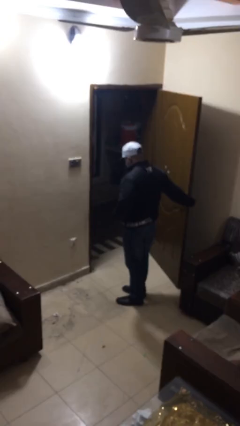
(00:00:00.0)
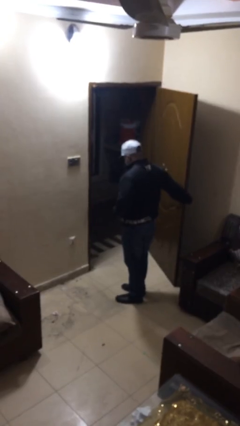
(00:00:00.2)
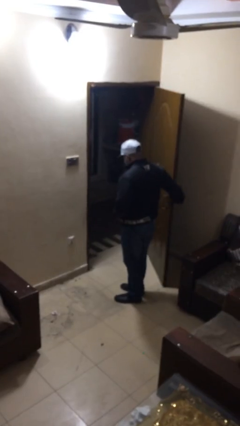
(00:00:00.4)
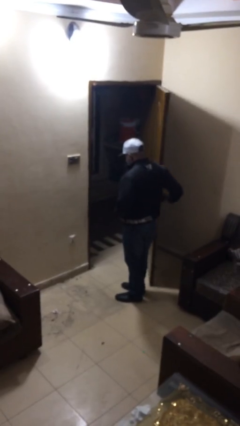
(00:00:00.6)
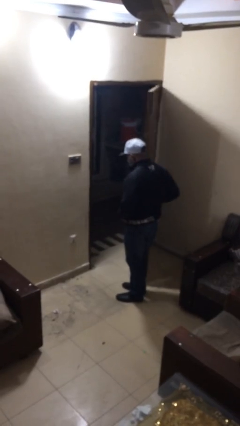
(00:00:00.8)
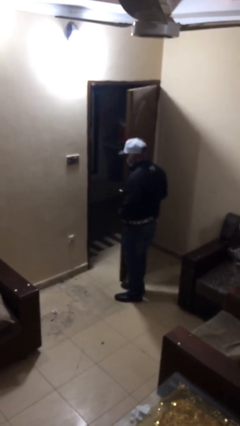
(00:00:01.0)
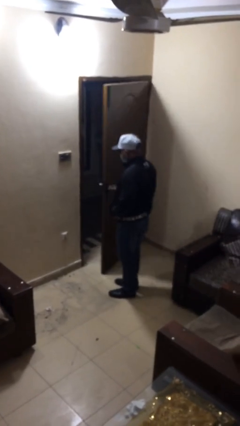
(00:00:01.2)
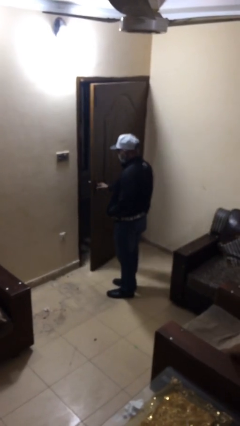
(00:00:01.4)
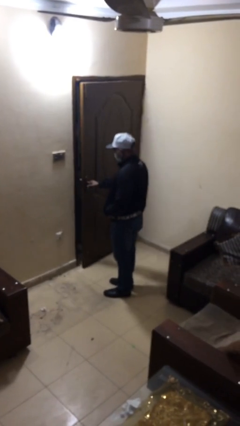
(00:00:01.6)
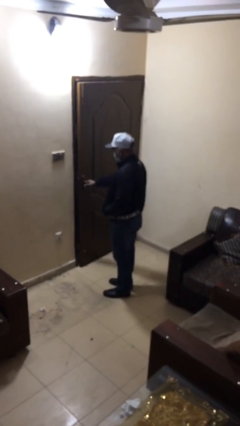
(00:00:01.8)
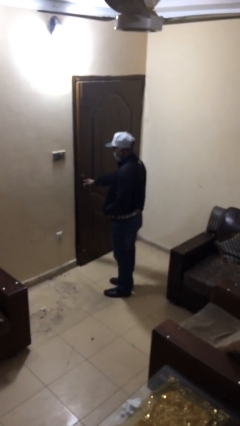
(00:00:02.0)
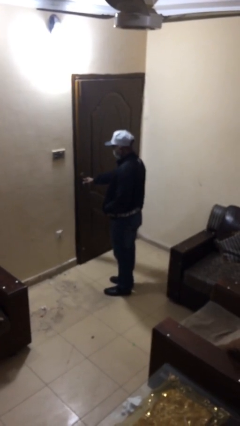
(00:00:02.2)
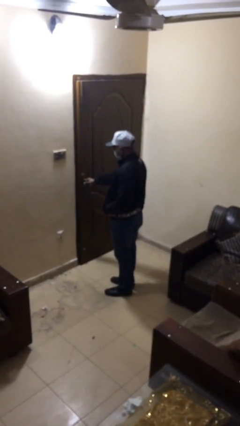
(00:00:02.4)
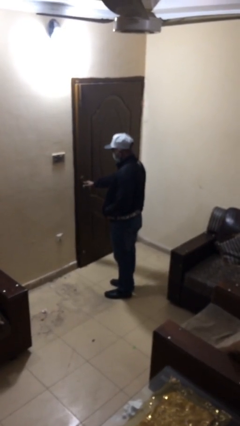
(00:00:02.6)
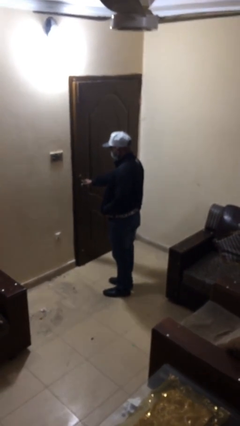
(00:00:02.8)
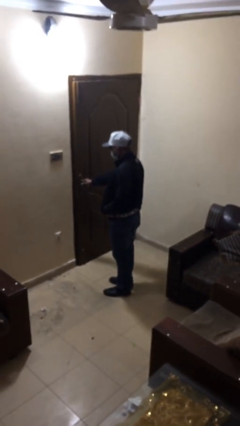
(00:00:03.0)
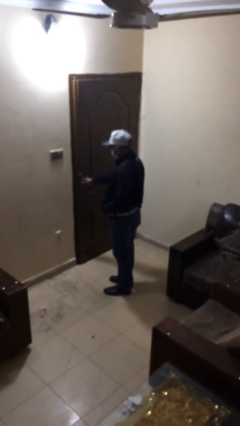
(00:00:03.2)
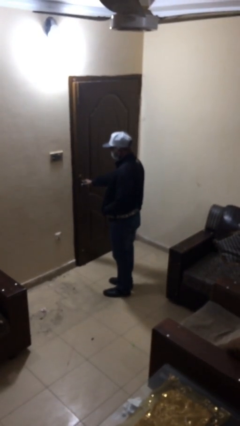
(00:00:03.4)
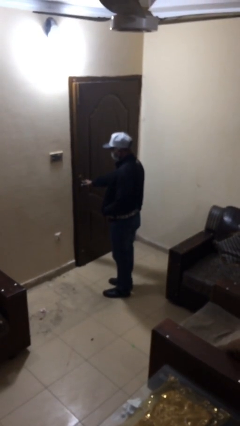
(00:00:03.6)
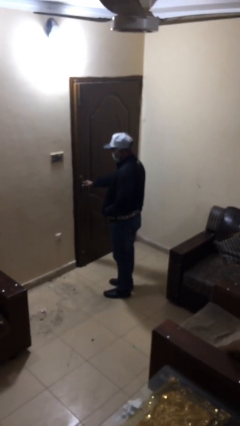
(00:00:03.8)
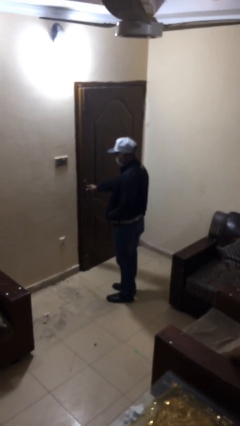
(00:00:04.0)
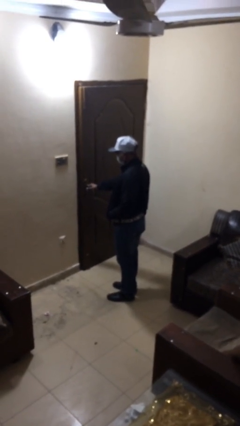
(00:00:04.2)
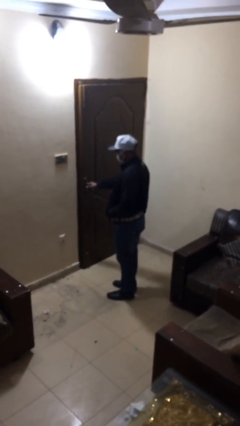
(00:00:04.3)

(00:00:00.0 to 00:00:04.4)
person closes facility door

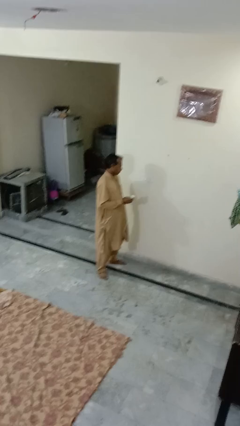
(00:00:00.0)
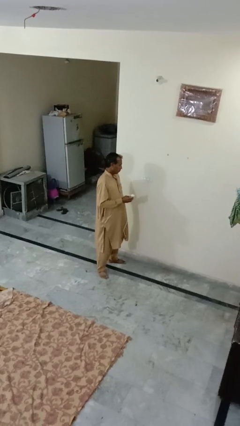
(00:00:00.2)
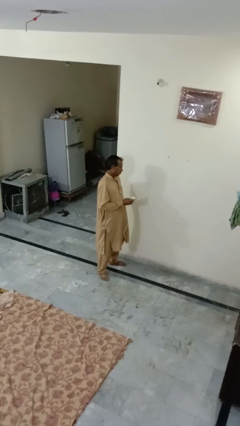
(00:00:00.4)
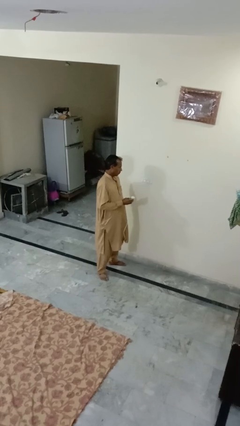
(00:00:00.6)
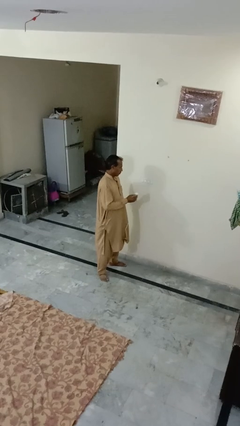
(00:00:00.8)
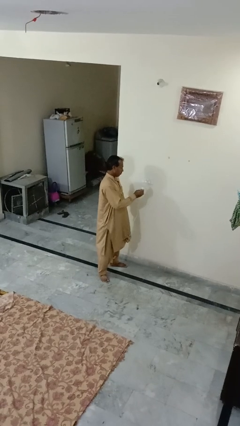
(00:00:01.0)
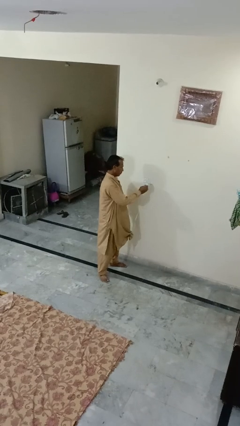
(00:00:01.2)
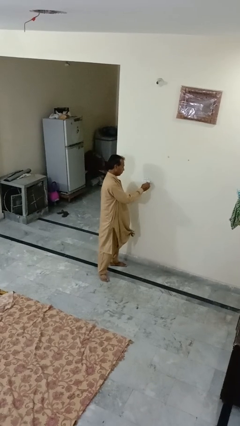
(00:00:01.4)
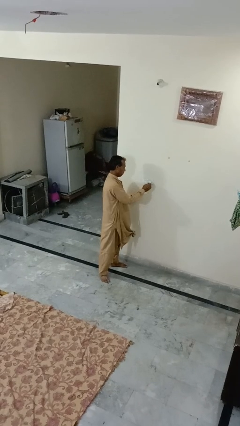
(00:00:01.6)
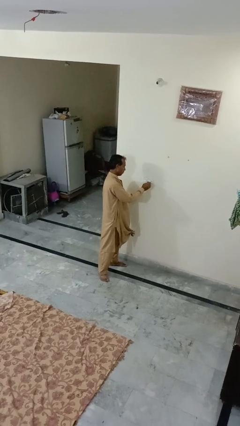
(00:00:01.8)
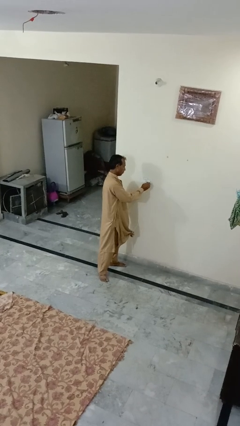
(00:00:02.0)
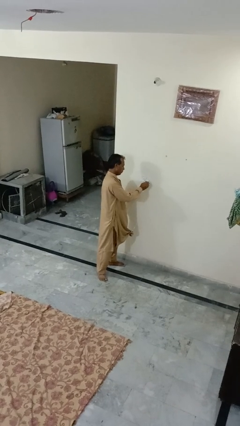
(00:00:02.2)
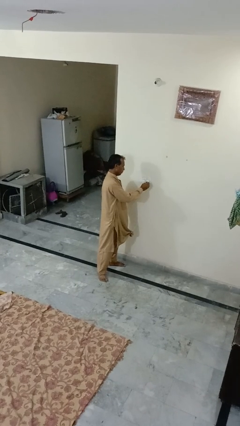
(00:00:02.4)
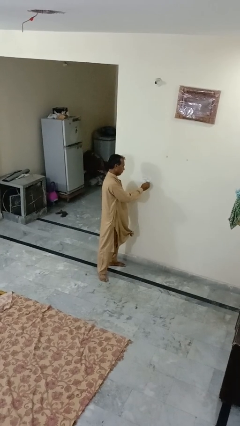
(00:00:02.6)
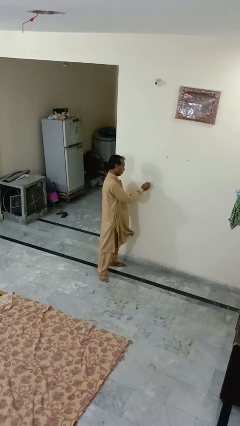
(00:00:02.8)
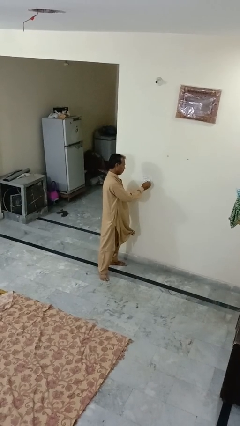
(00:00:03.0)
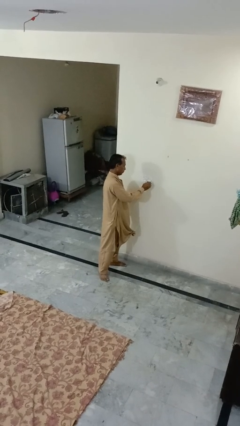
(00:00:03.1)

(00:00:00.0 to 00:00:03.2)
person plugs into electrical socket

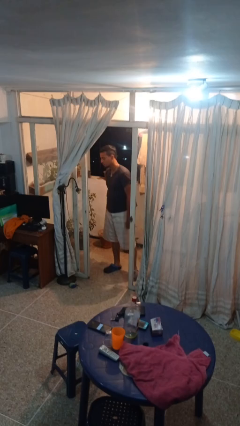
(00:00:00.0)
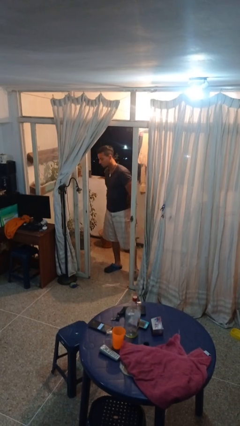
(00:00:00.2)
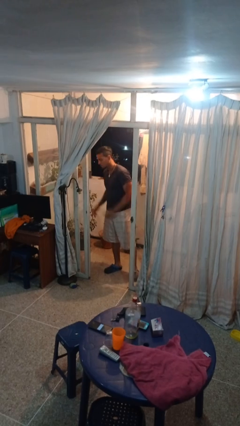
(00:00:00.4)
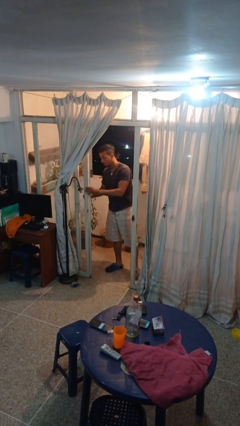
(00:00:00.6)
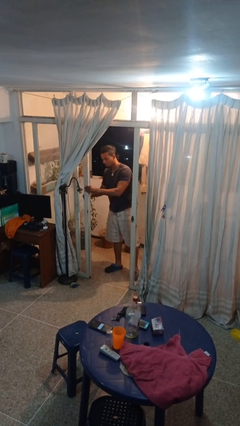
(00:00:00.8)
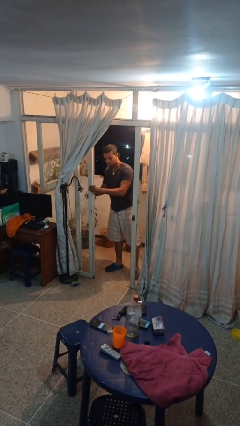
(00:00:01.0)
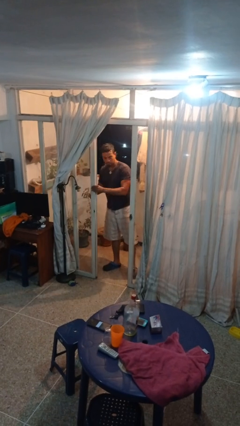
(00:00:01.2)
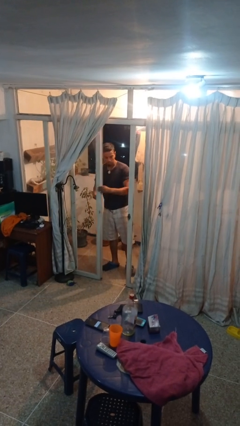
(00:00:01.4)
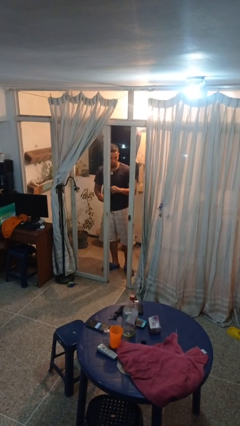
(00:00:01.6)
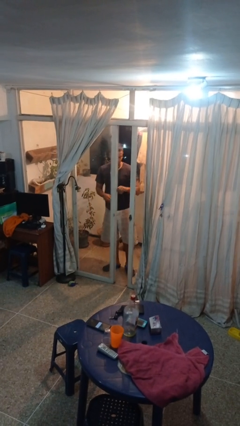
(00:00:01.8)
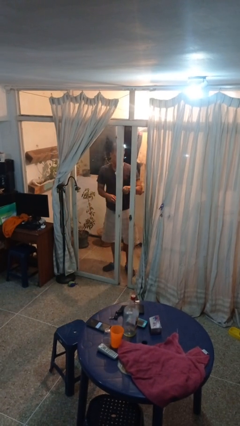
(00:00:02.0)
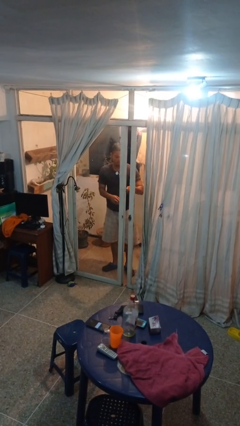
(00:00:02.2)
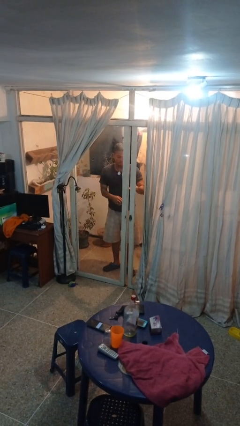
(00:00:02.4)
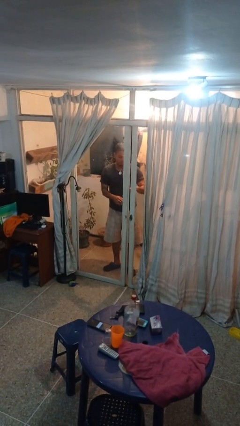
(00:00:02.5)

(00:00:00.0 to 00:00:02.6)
person closes sliding door

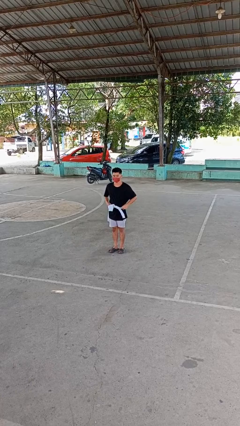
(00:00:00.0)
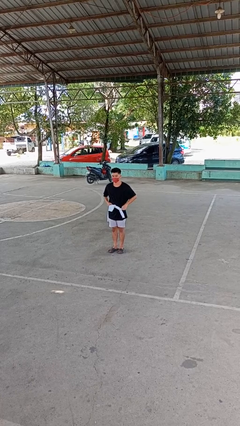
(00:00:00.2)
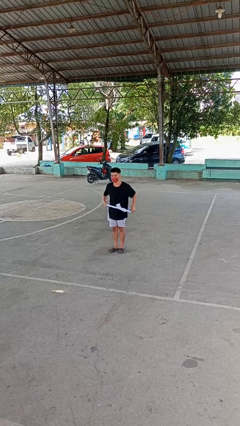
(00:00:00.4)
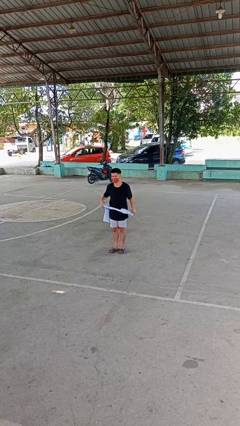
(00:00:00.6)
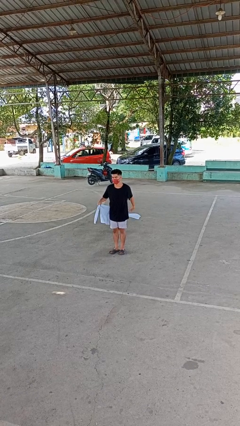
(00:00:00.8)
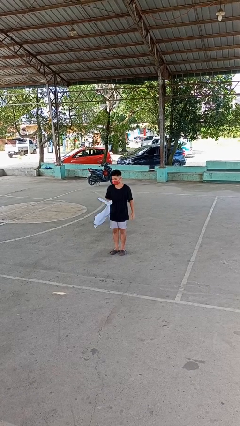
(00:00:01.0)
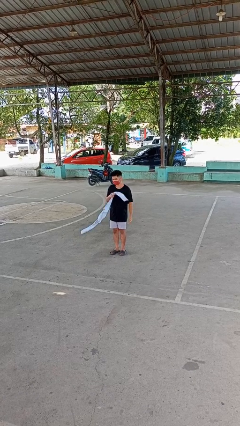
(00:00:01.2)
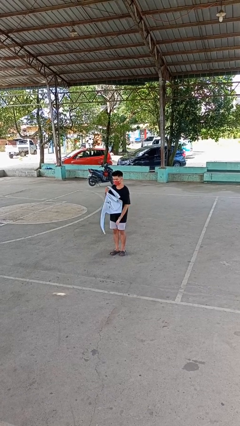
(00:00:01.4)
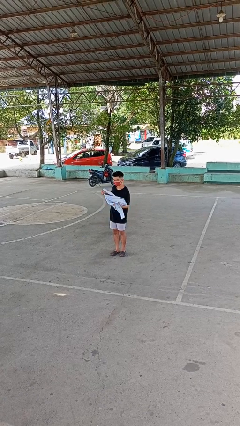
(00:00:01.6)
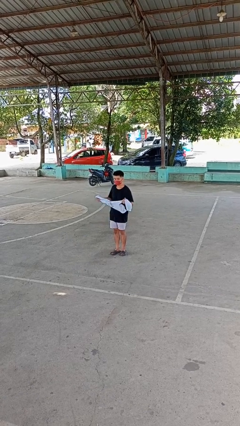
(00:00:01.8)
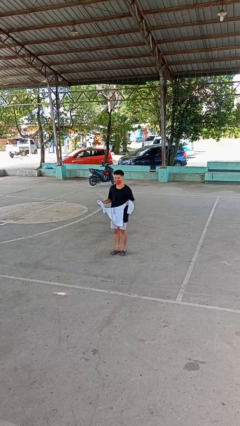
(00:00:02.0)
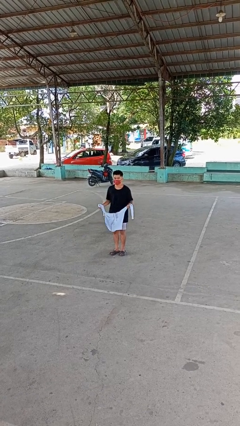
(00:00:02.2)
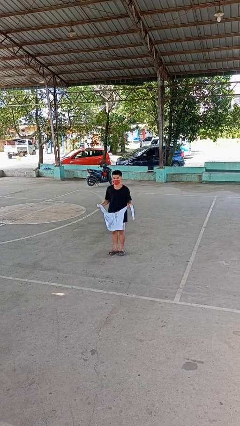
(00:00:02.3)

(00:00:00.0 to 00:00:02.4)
person unties jacket around waist

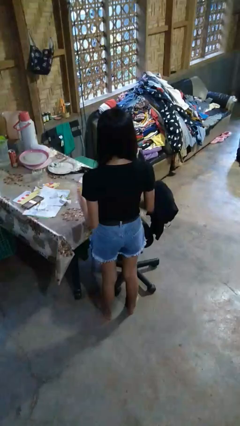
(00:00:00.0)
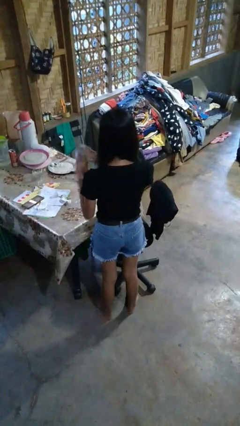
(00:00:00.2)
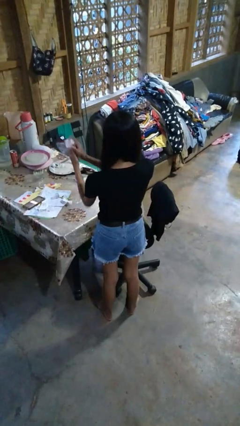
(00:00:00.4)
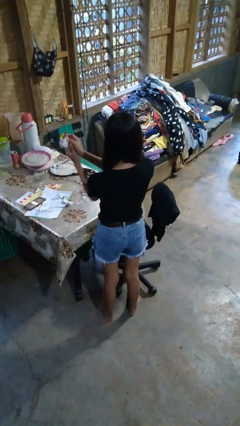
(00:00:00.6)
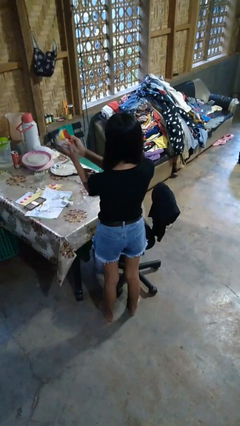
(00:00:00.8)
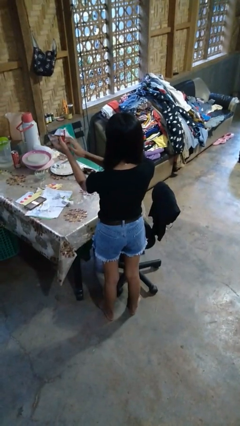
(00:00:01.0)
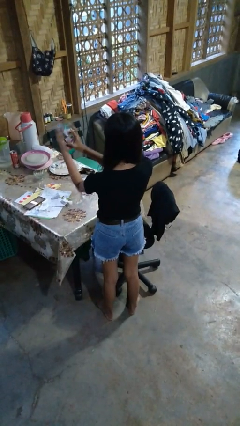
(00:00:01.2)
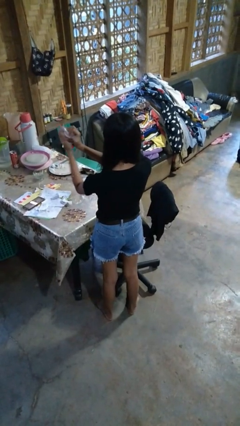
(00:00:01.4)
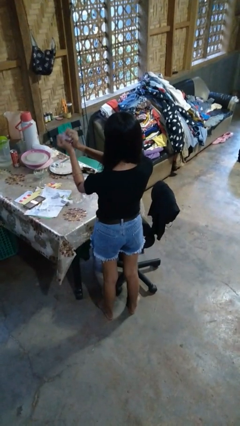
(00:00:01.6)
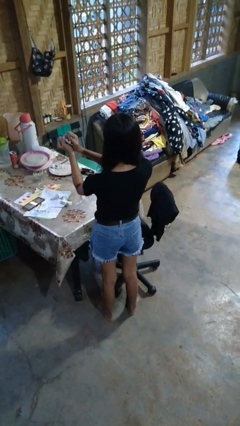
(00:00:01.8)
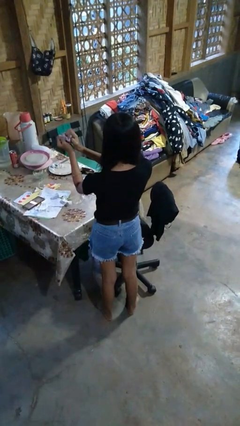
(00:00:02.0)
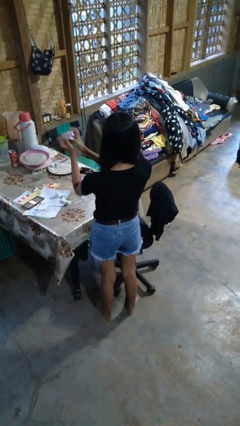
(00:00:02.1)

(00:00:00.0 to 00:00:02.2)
person crumples paper

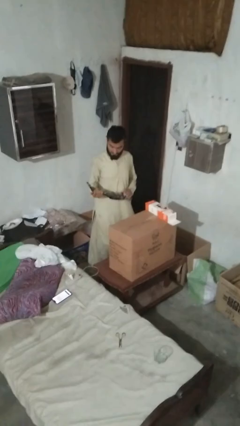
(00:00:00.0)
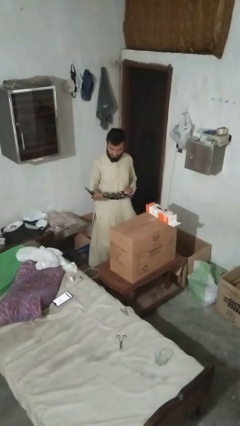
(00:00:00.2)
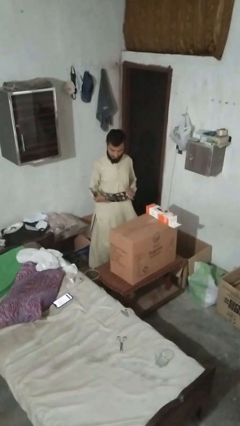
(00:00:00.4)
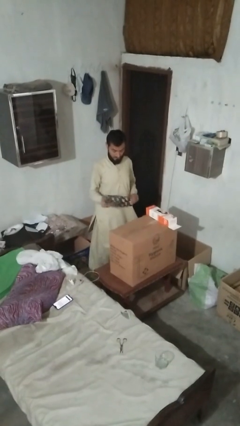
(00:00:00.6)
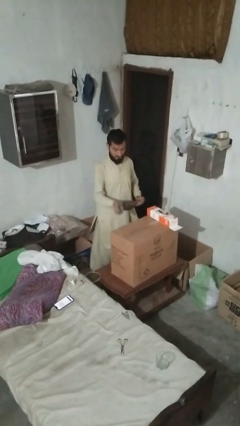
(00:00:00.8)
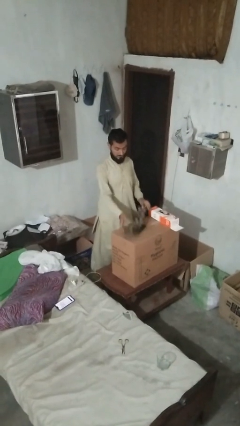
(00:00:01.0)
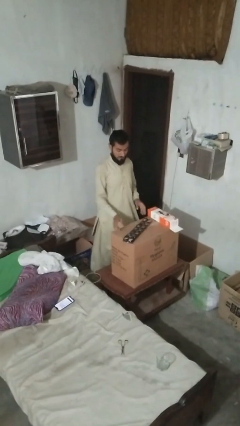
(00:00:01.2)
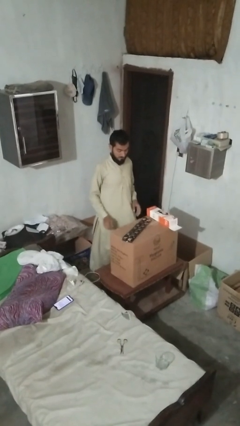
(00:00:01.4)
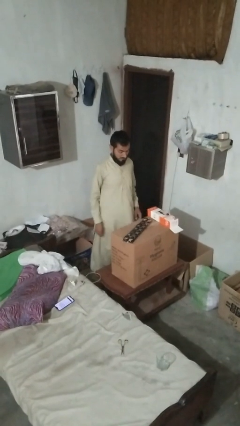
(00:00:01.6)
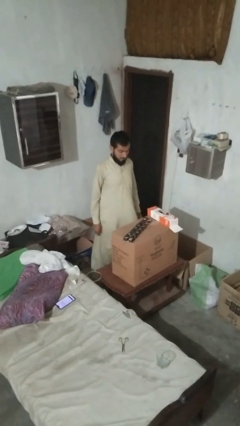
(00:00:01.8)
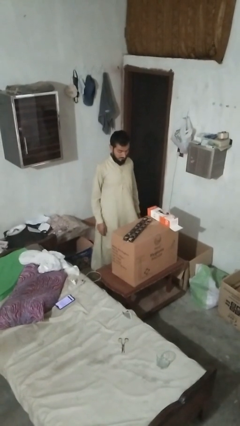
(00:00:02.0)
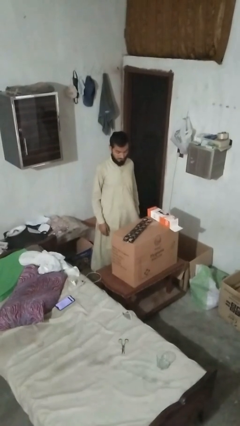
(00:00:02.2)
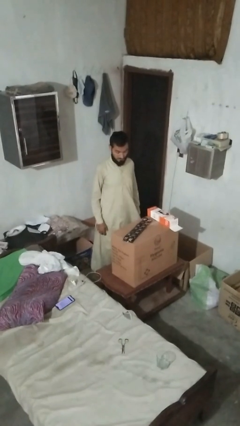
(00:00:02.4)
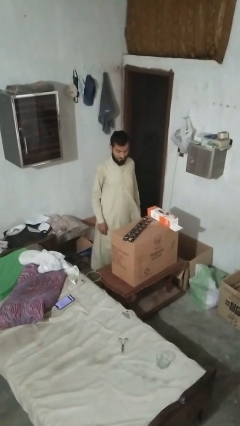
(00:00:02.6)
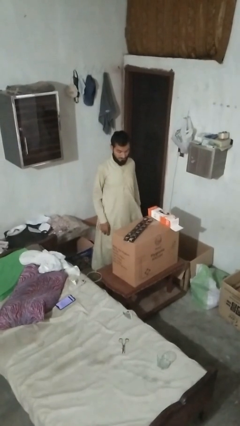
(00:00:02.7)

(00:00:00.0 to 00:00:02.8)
person puts down object on countertop
